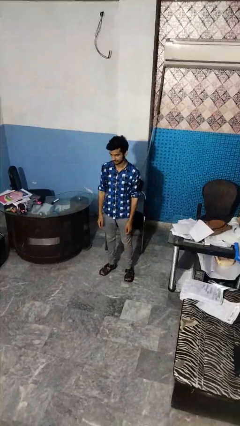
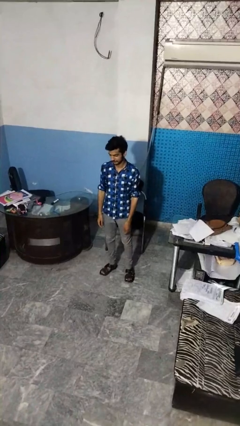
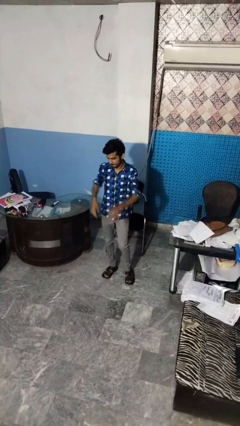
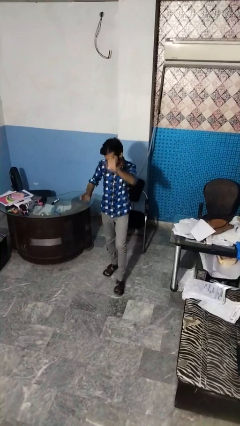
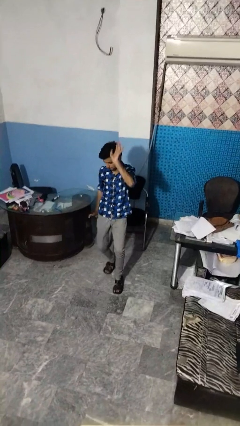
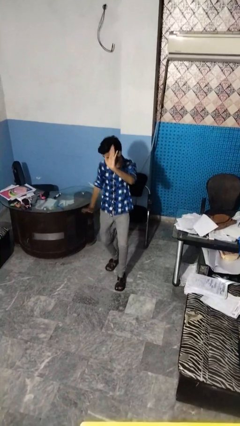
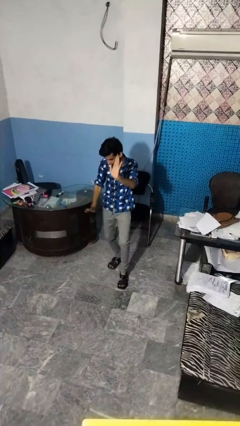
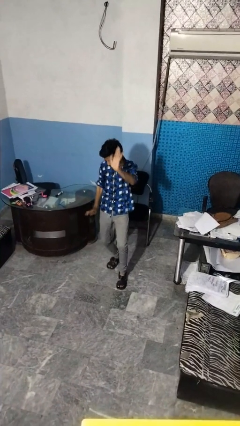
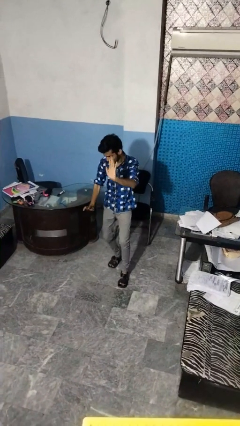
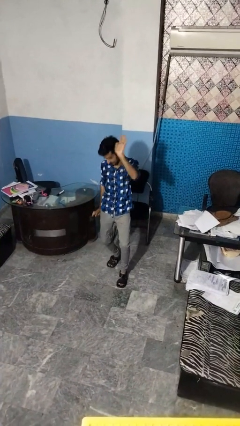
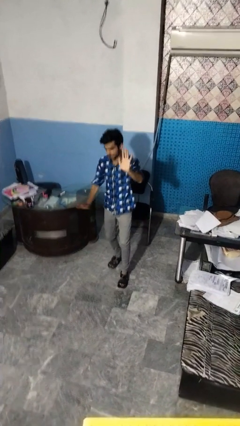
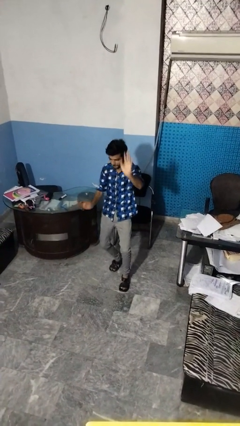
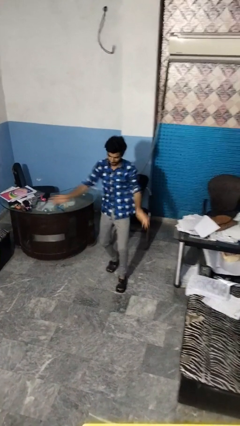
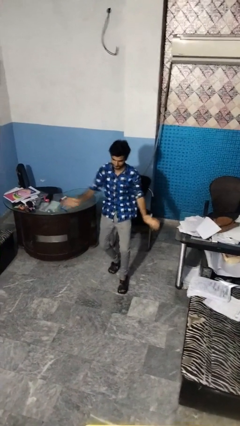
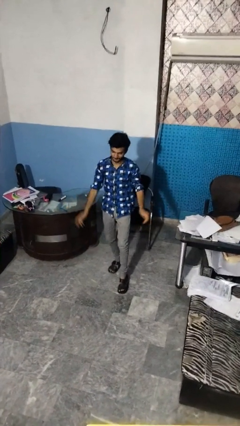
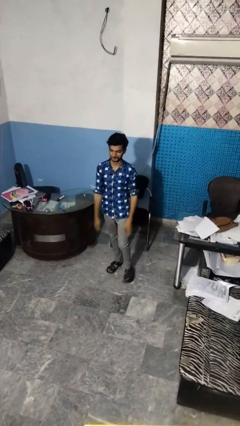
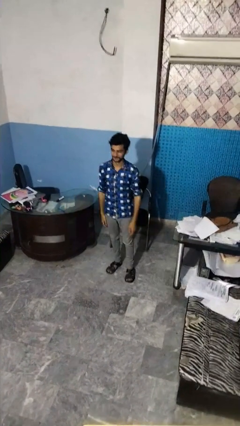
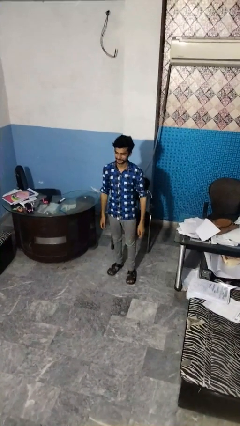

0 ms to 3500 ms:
person dances in place

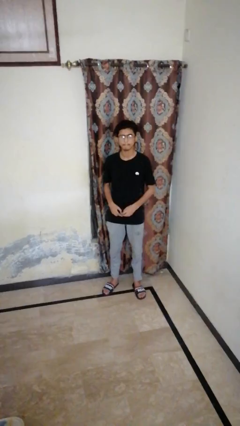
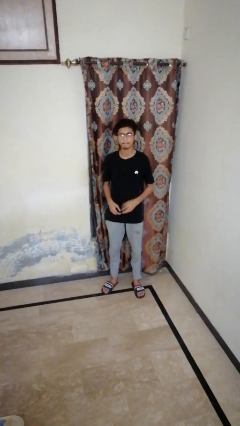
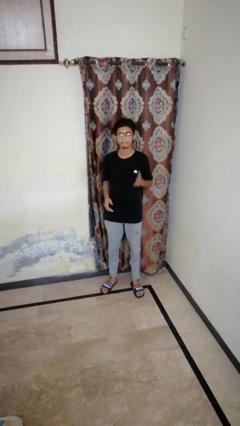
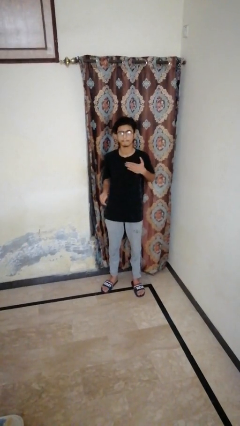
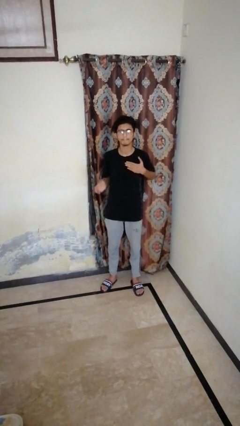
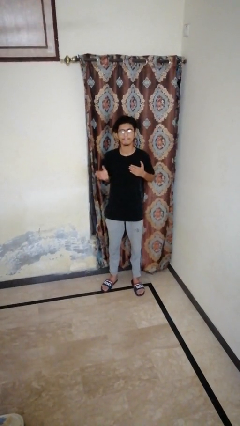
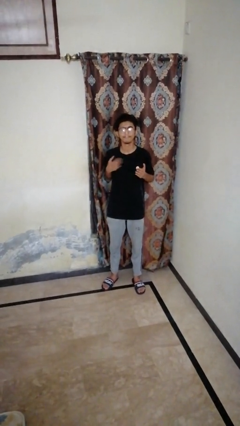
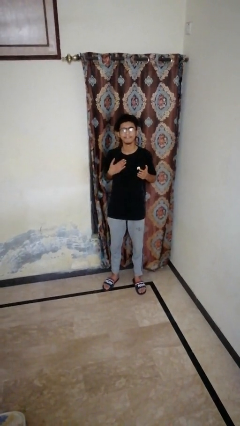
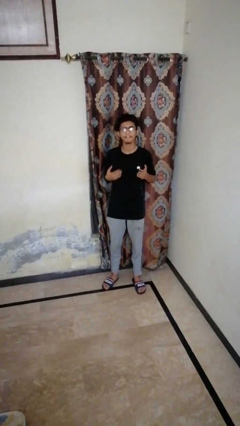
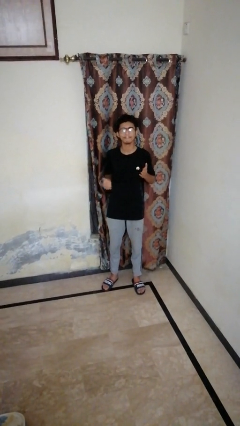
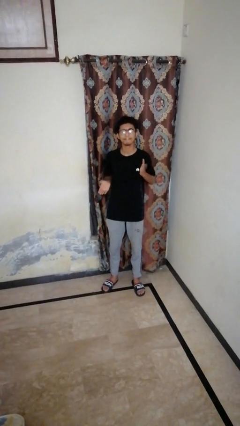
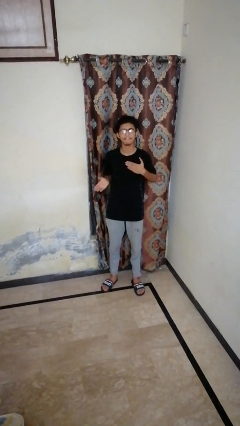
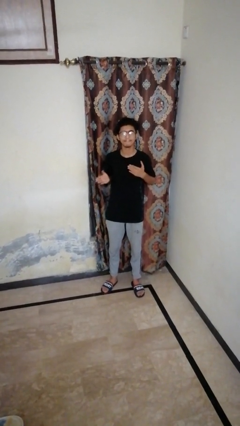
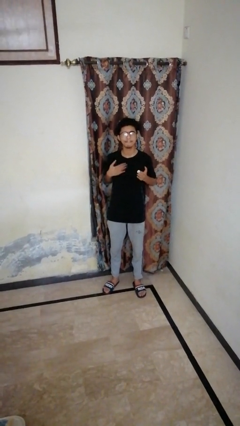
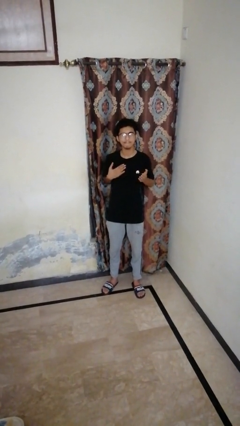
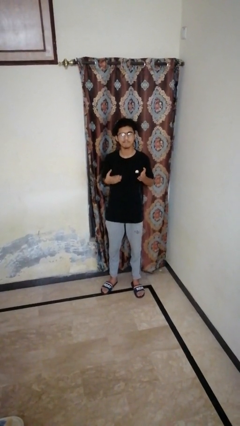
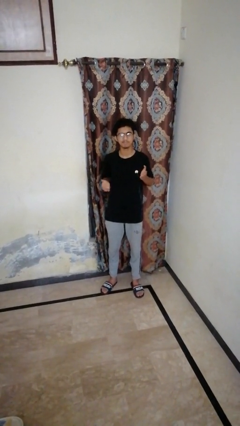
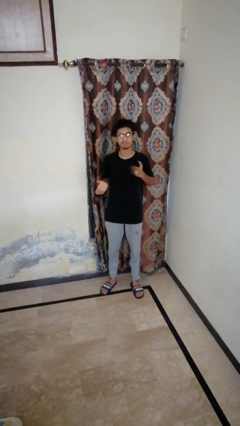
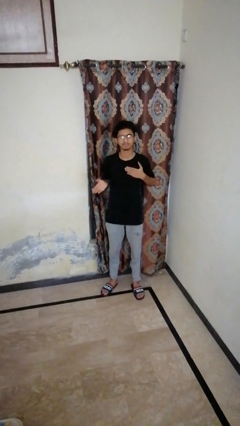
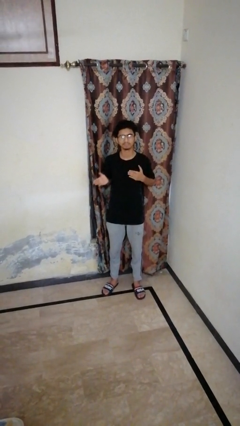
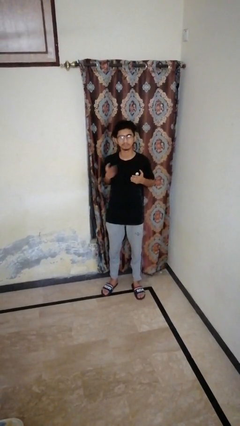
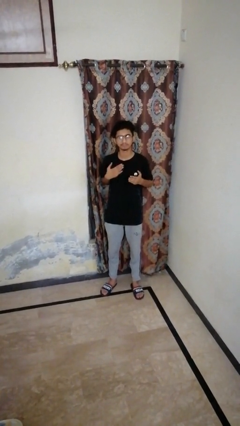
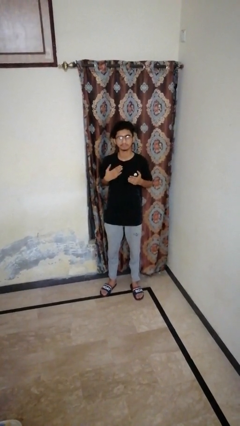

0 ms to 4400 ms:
person drums on chest

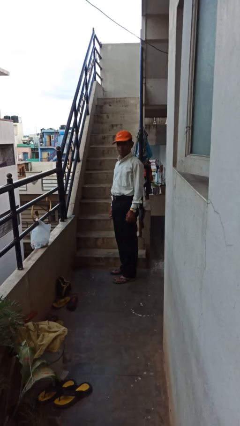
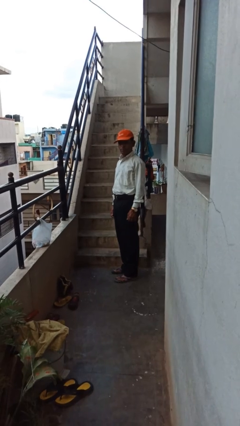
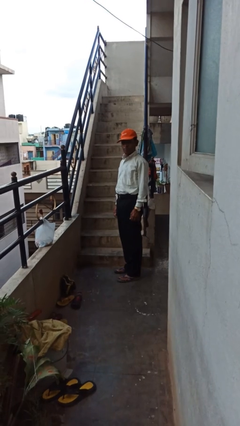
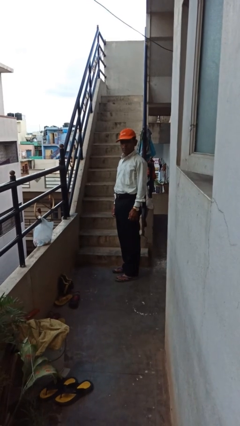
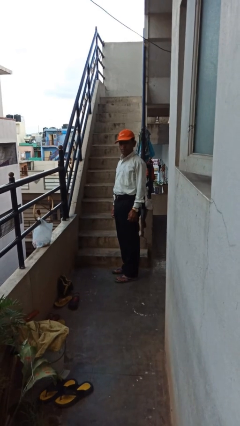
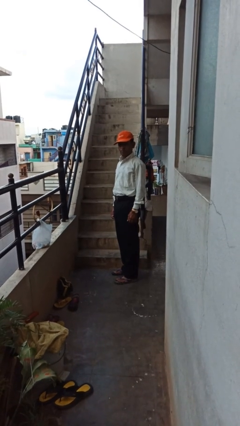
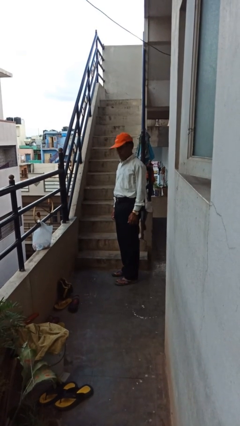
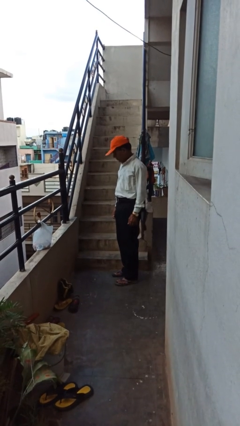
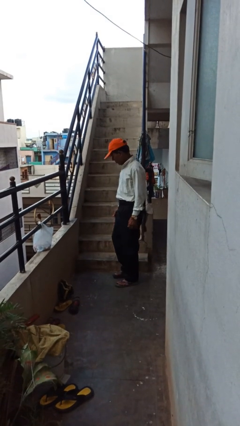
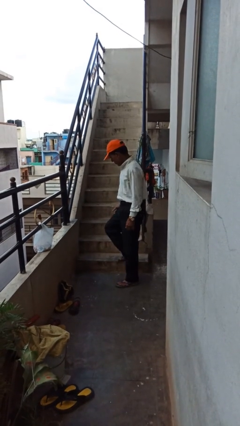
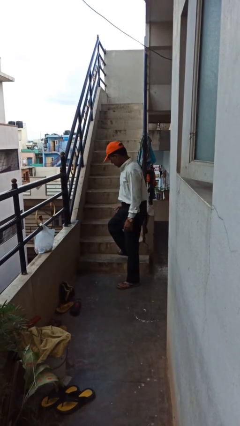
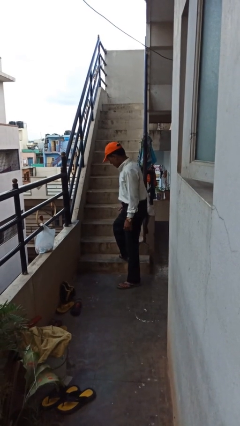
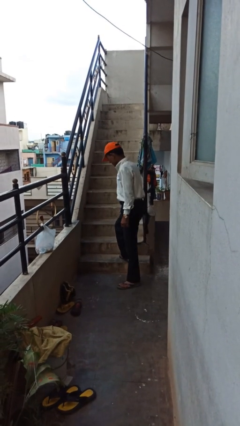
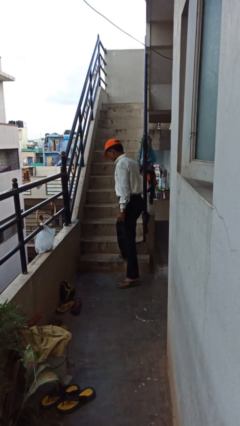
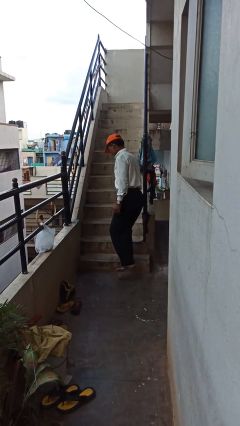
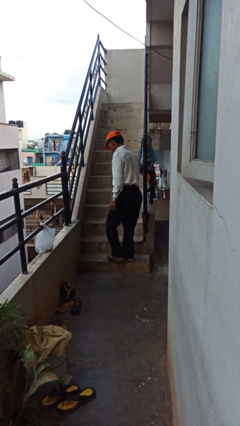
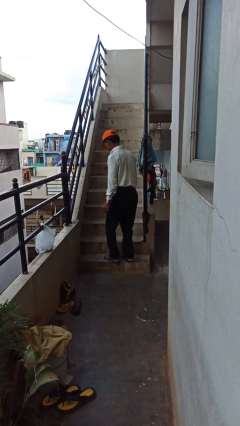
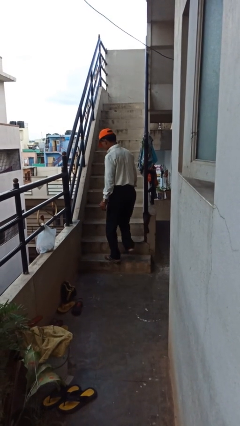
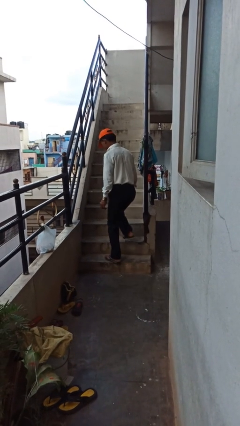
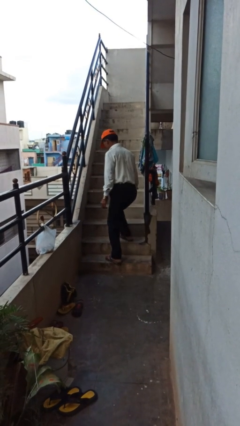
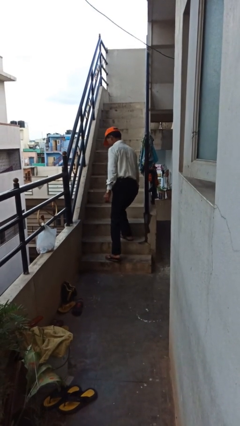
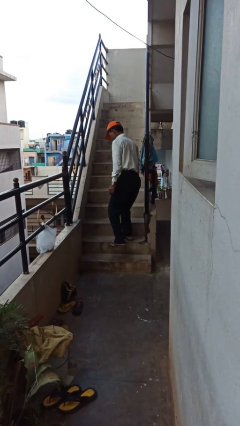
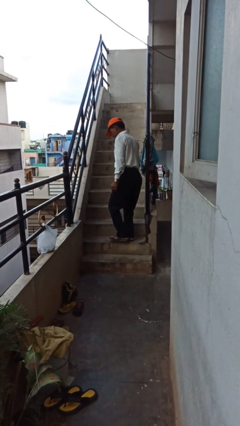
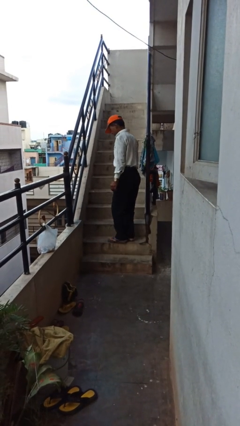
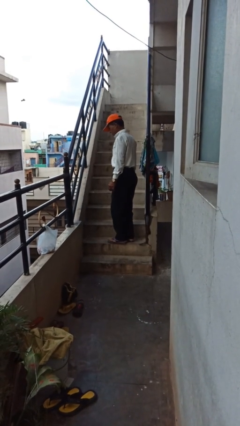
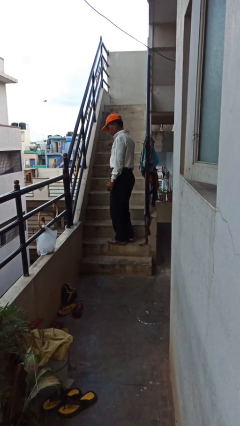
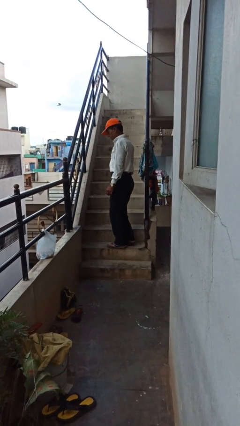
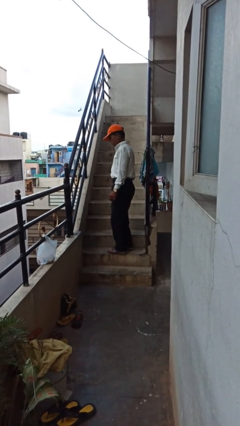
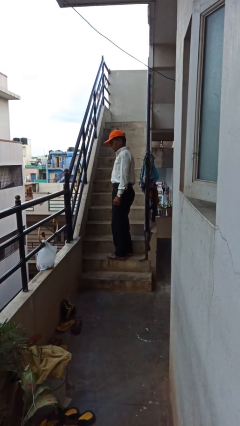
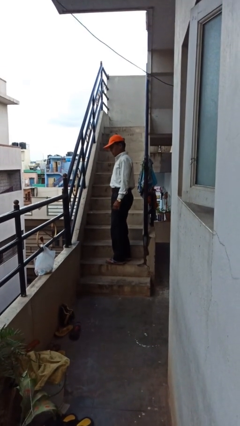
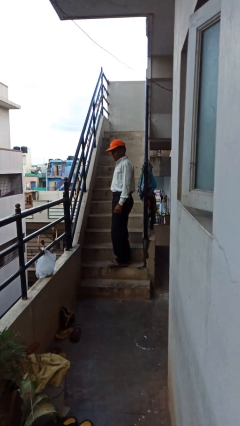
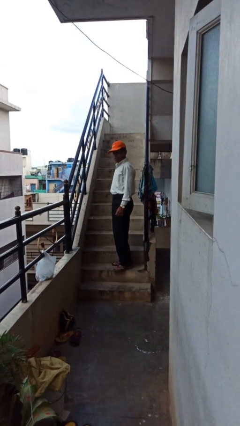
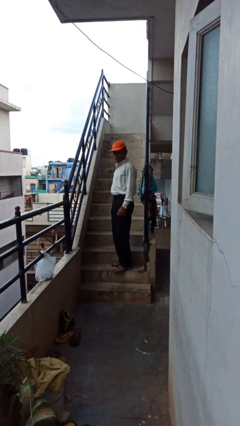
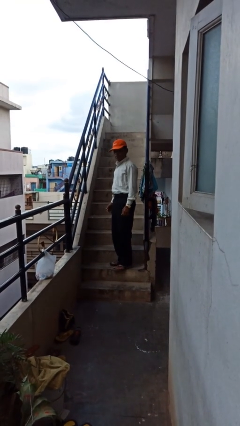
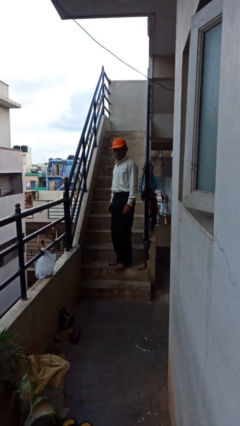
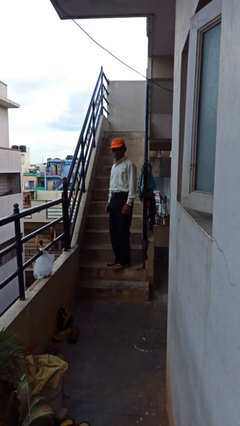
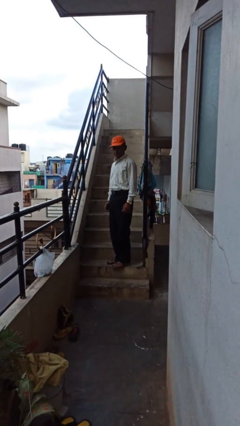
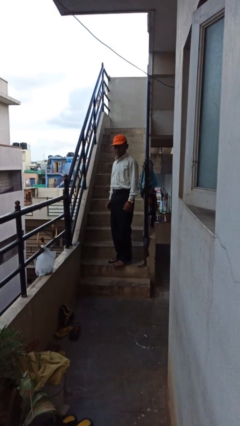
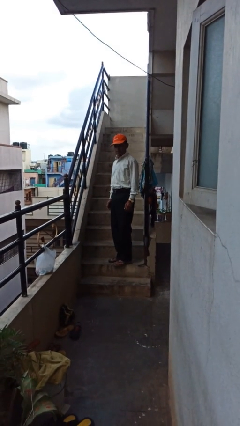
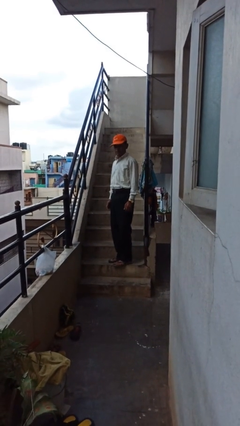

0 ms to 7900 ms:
person climbs up stairs

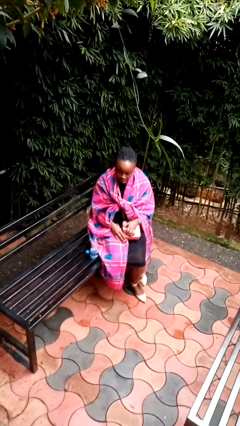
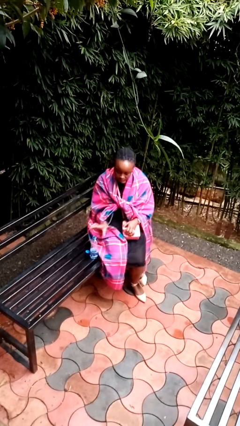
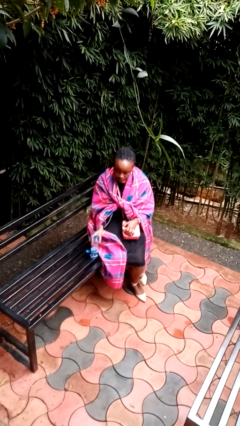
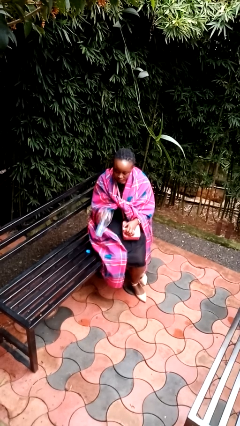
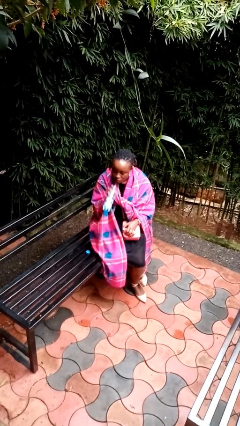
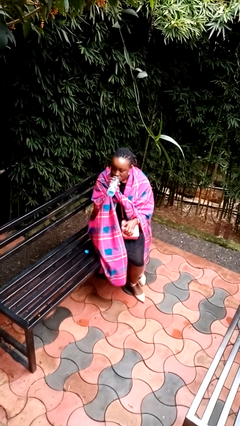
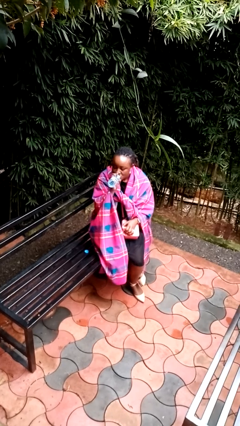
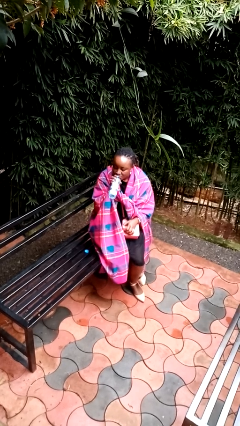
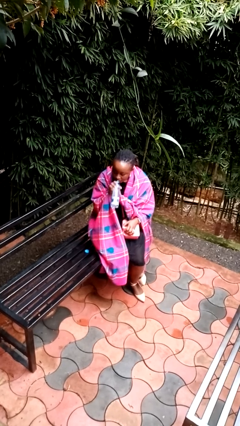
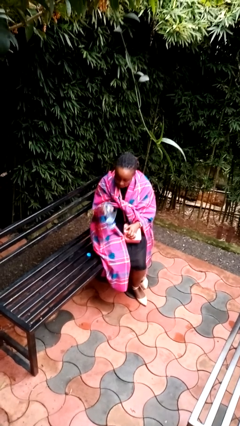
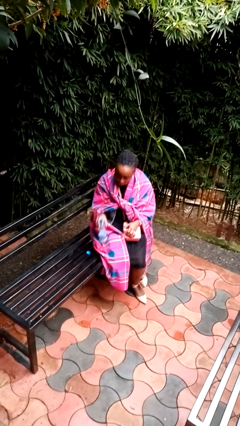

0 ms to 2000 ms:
person drinks from cup

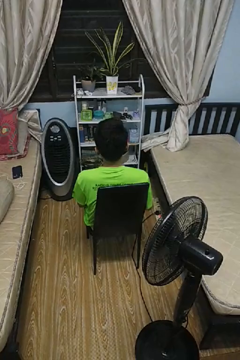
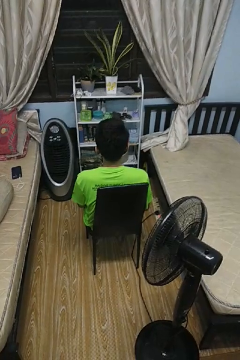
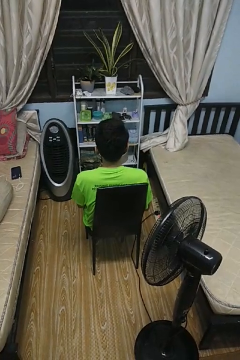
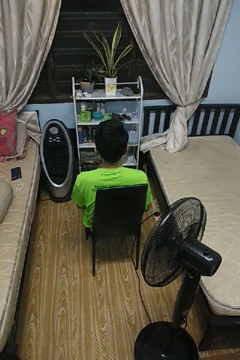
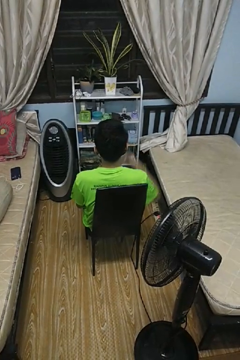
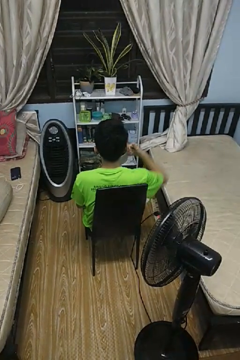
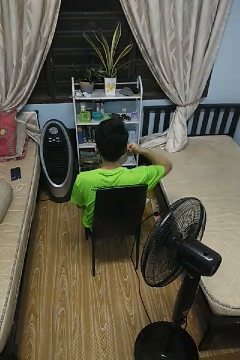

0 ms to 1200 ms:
person gestures call me
